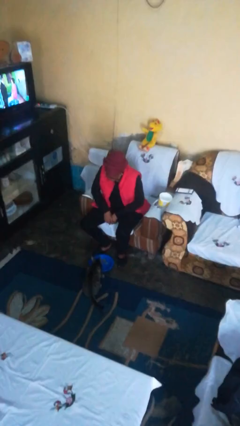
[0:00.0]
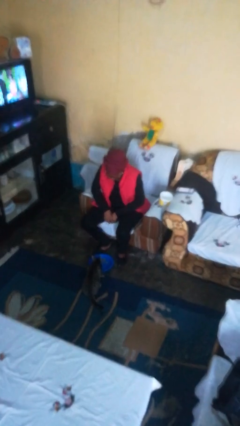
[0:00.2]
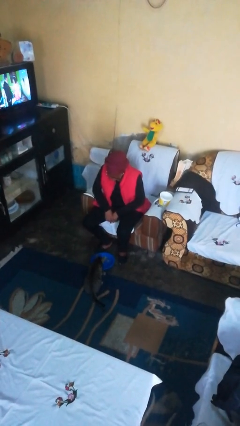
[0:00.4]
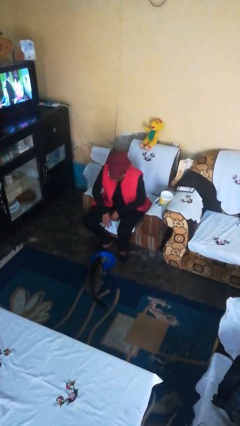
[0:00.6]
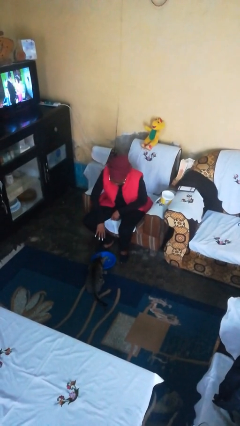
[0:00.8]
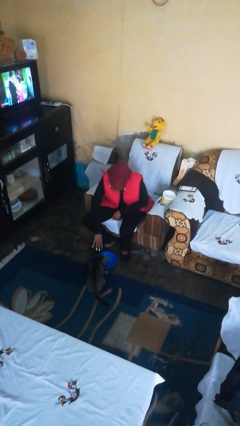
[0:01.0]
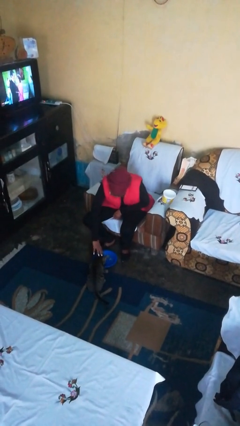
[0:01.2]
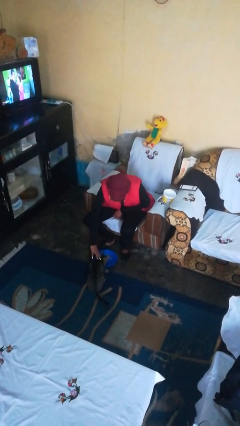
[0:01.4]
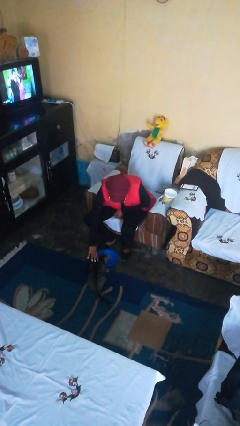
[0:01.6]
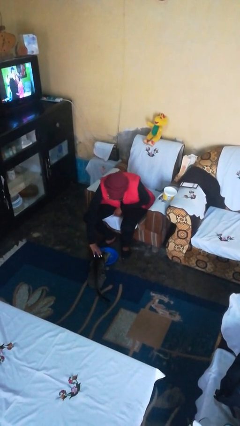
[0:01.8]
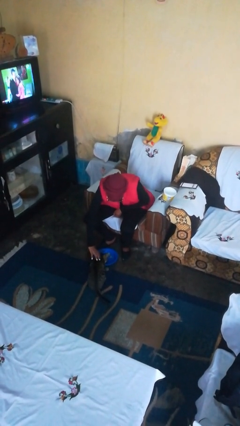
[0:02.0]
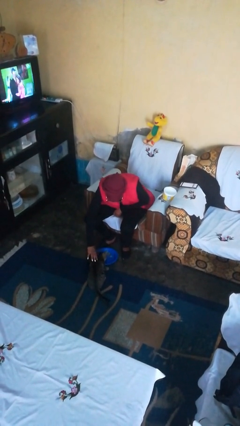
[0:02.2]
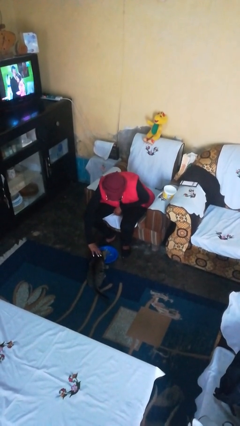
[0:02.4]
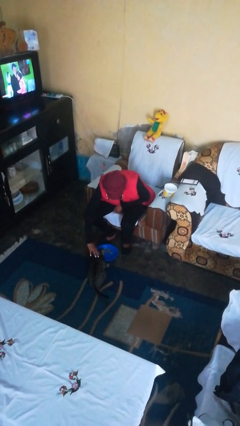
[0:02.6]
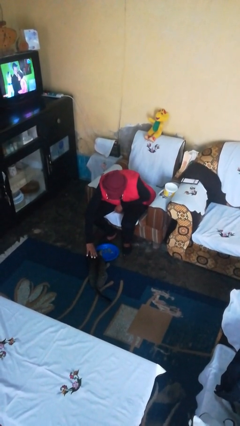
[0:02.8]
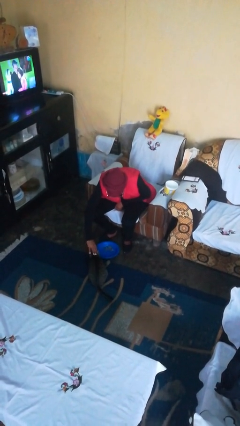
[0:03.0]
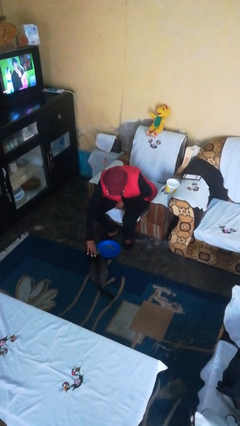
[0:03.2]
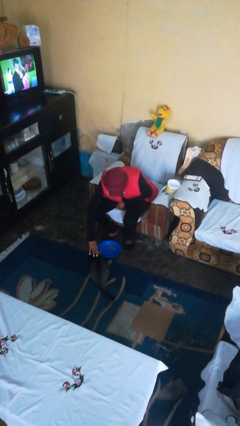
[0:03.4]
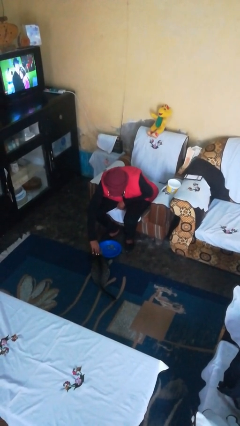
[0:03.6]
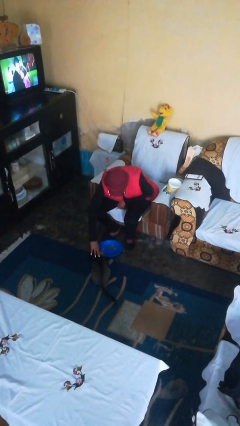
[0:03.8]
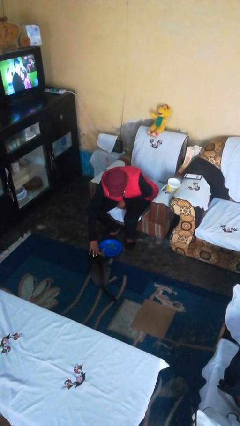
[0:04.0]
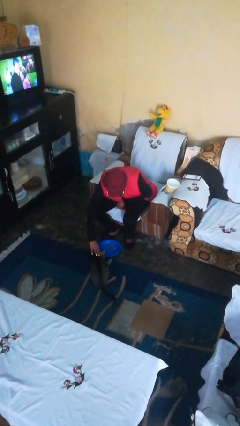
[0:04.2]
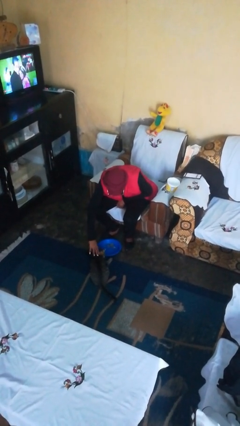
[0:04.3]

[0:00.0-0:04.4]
person pets cat

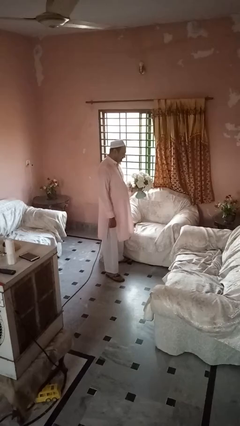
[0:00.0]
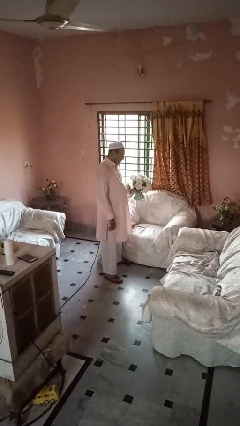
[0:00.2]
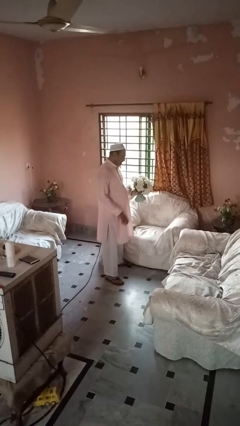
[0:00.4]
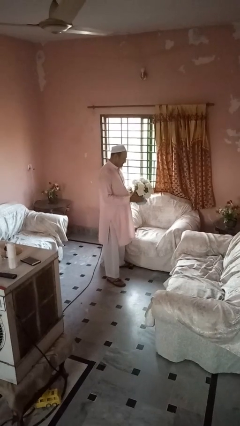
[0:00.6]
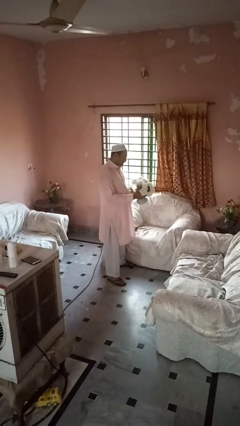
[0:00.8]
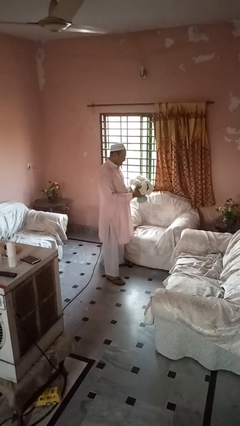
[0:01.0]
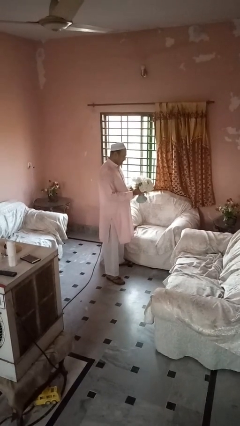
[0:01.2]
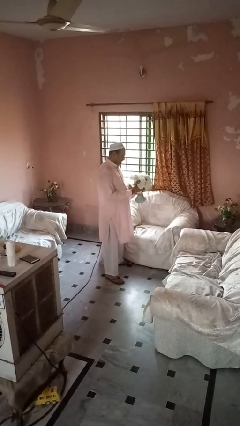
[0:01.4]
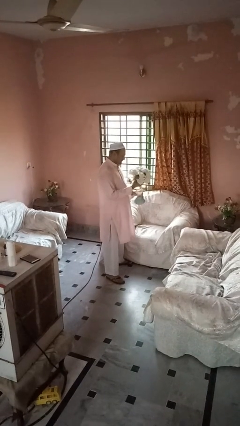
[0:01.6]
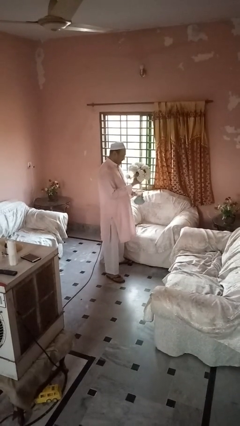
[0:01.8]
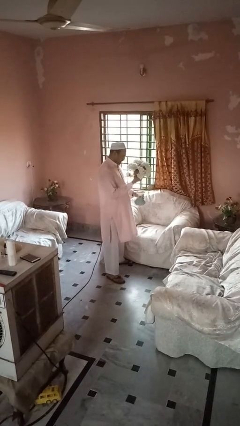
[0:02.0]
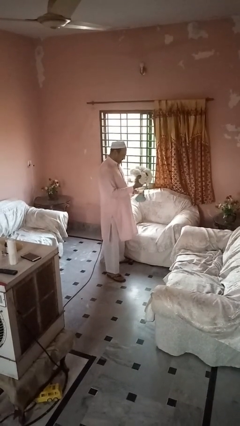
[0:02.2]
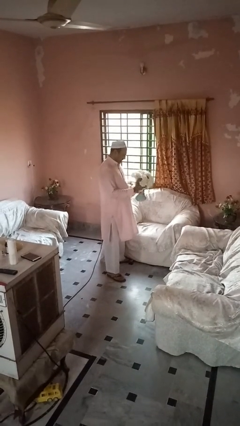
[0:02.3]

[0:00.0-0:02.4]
person arranges flowers in vase

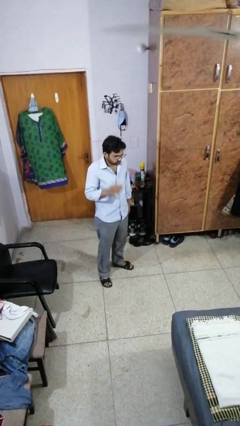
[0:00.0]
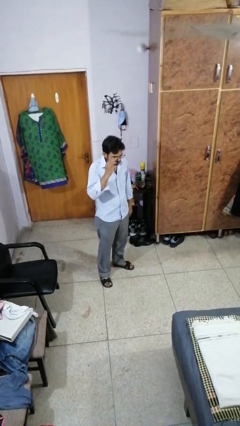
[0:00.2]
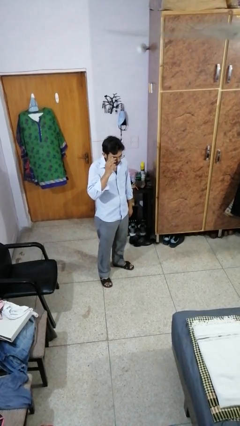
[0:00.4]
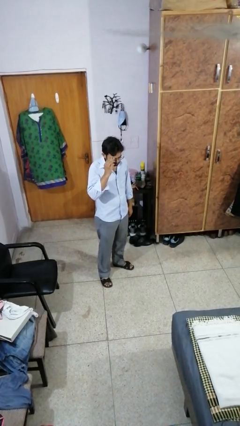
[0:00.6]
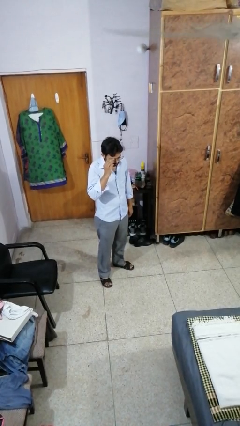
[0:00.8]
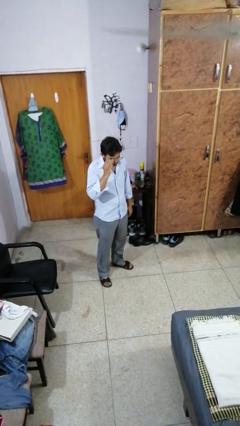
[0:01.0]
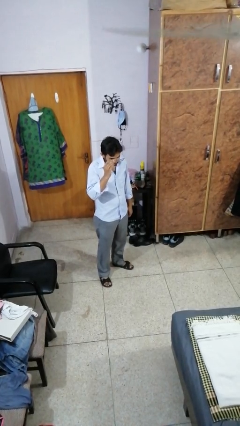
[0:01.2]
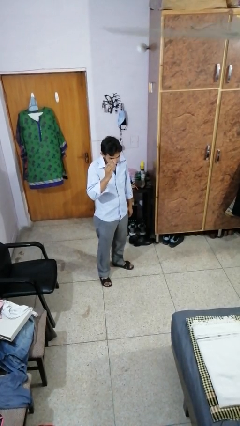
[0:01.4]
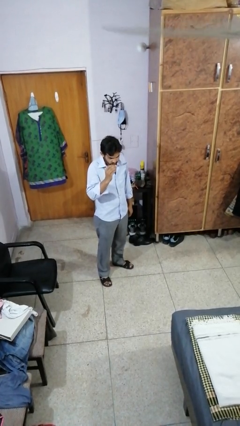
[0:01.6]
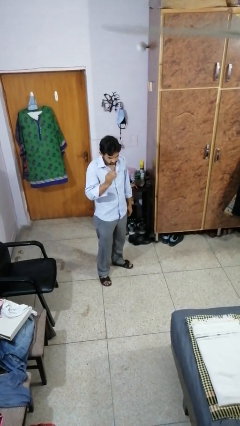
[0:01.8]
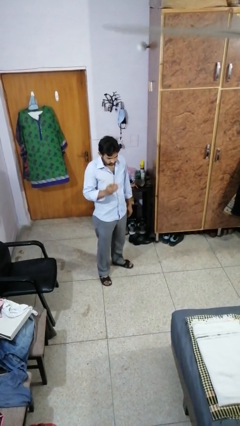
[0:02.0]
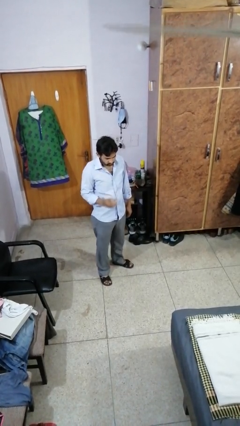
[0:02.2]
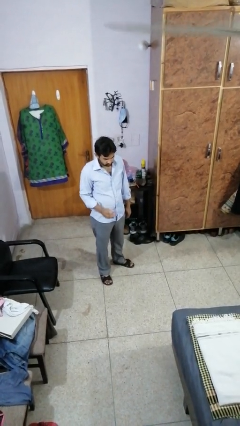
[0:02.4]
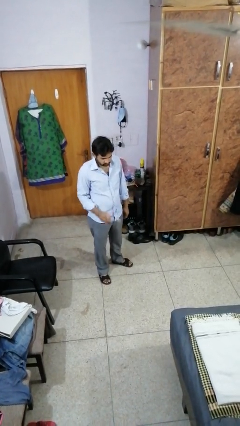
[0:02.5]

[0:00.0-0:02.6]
person takes off glasses

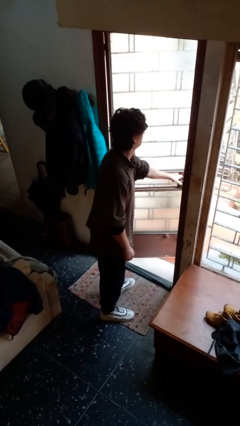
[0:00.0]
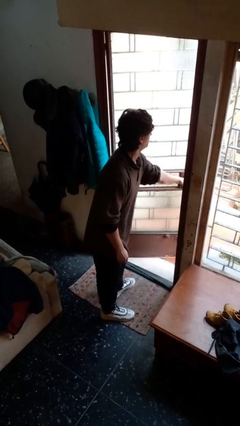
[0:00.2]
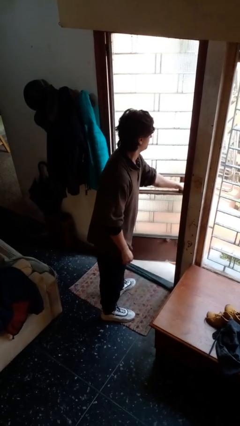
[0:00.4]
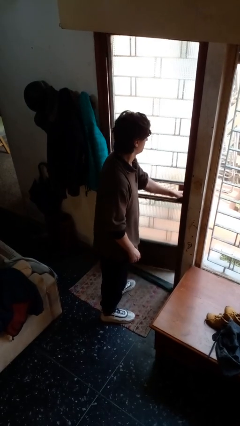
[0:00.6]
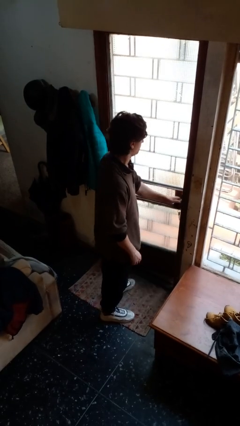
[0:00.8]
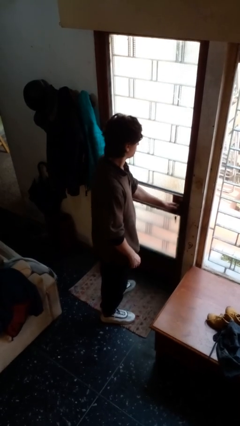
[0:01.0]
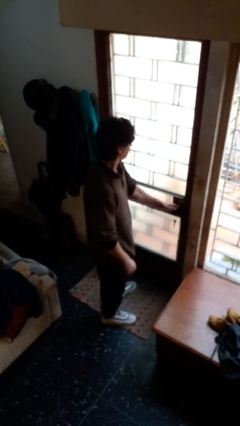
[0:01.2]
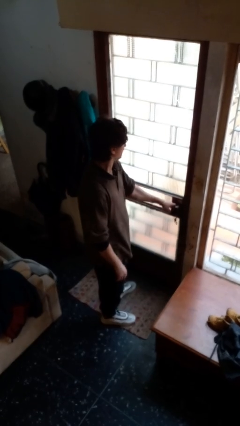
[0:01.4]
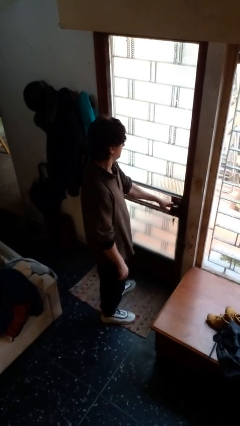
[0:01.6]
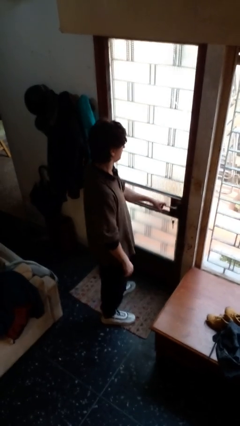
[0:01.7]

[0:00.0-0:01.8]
person closes facility door

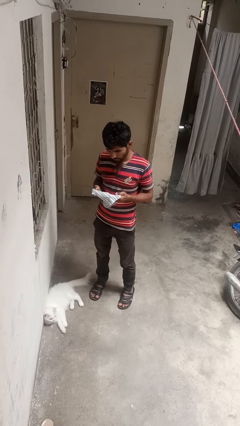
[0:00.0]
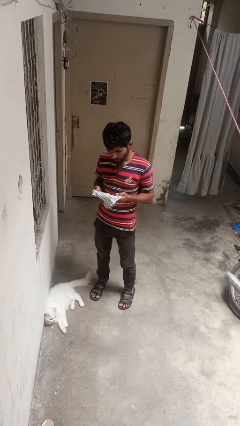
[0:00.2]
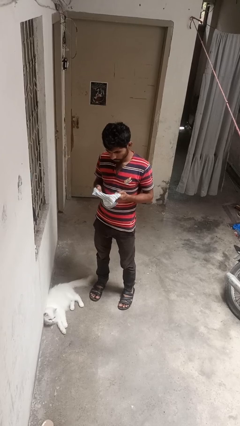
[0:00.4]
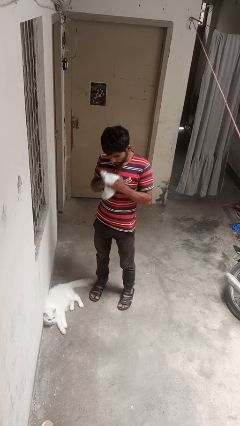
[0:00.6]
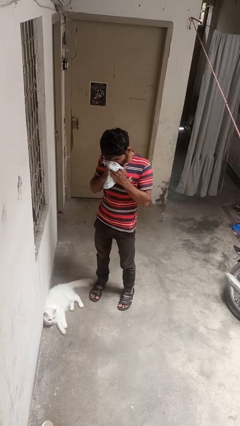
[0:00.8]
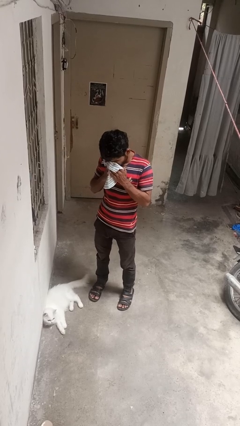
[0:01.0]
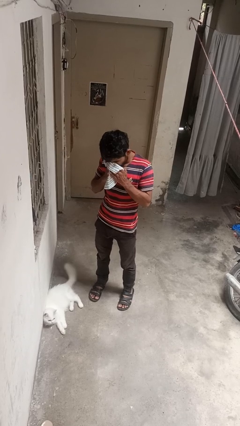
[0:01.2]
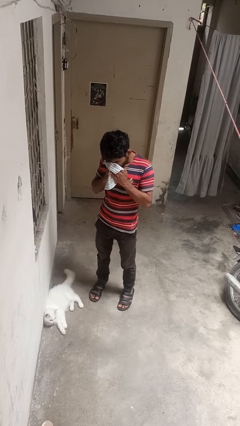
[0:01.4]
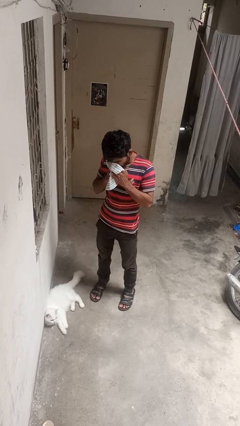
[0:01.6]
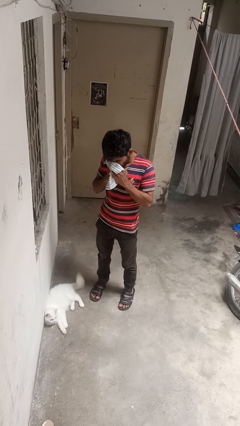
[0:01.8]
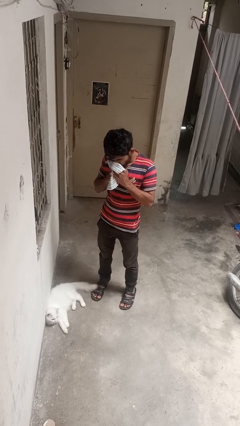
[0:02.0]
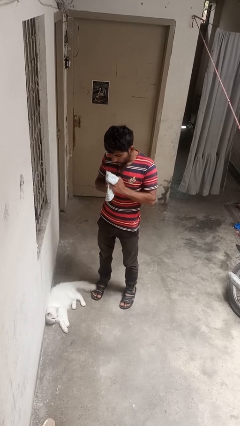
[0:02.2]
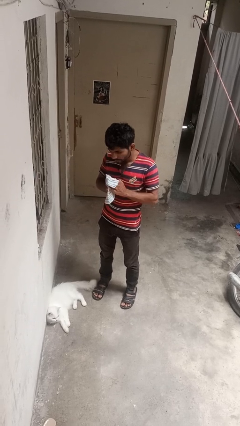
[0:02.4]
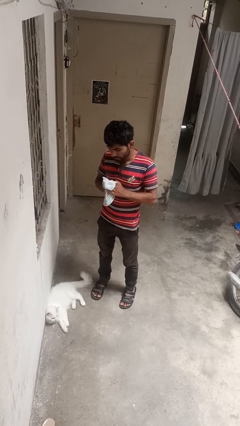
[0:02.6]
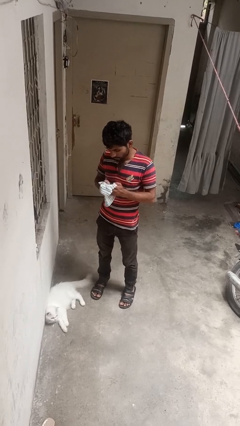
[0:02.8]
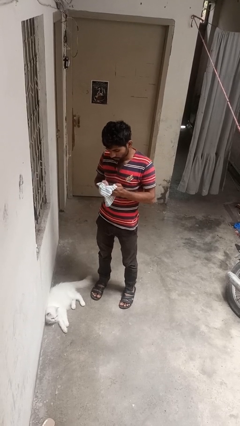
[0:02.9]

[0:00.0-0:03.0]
person blows nose

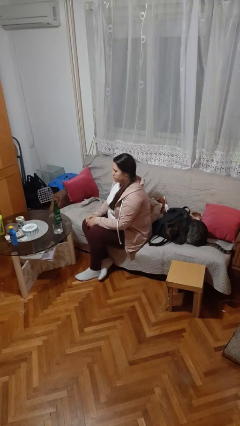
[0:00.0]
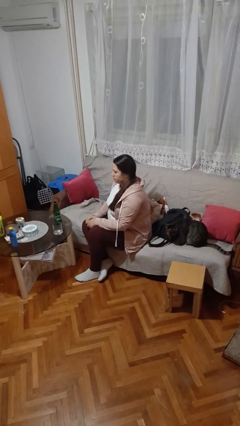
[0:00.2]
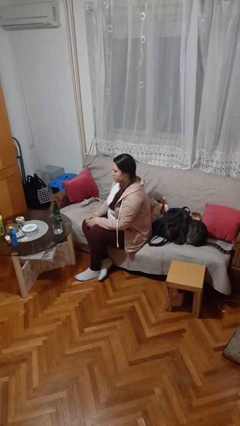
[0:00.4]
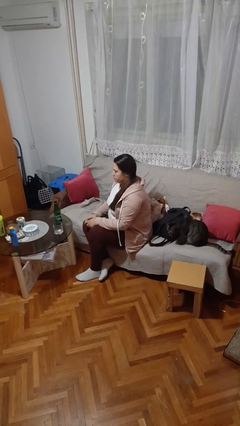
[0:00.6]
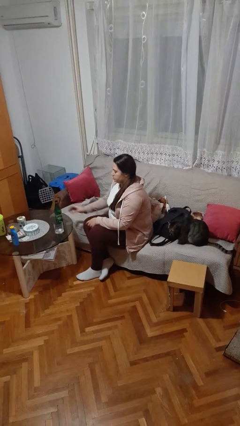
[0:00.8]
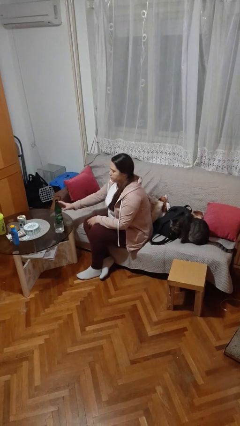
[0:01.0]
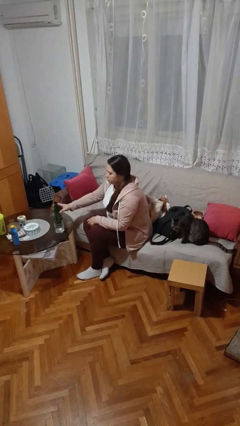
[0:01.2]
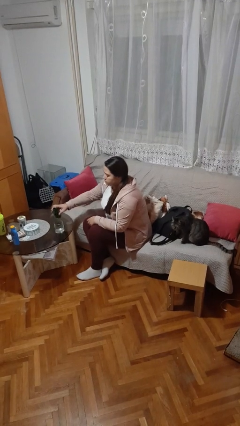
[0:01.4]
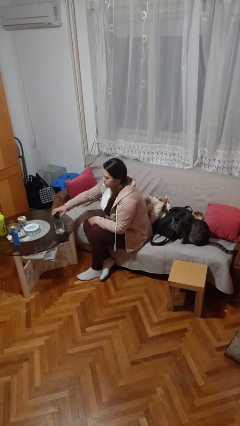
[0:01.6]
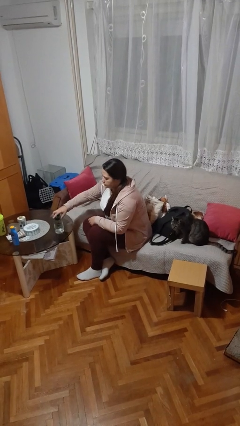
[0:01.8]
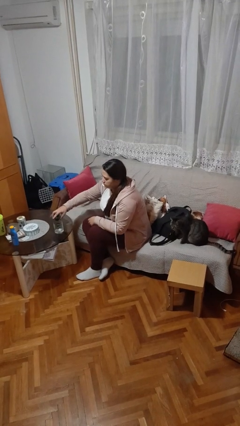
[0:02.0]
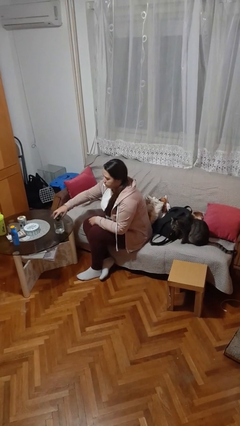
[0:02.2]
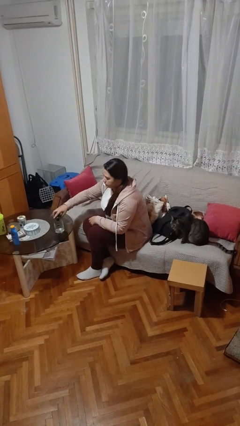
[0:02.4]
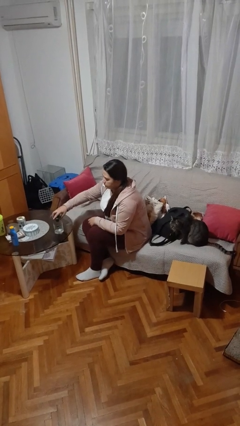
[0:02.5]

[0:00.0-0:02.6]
person pours liquid into cup
